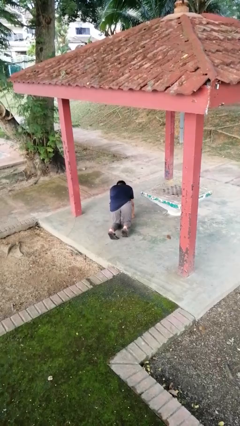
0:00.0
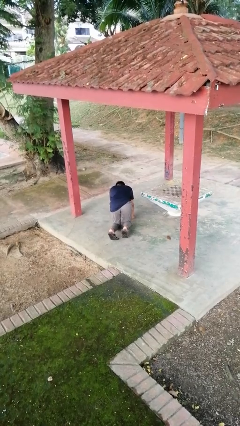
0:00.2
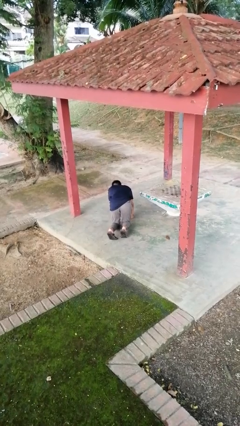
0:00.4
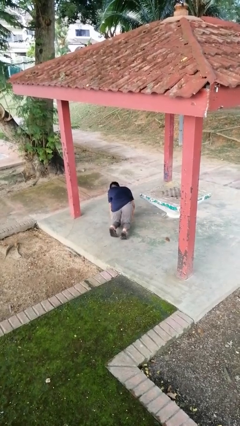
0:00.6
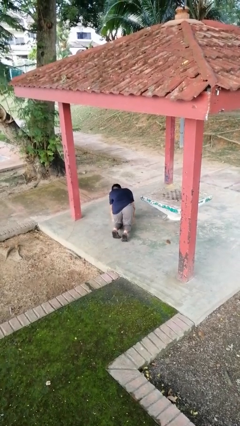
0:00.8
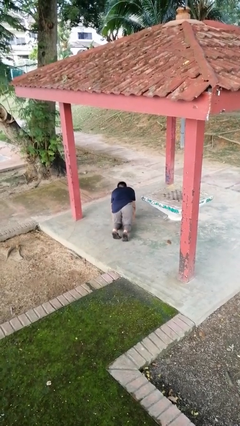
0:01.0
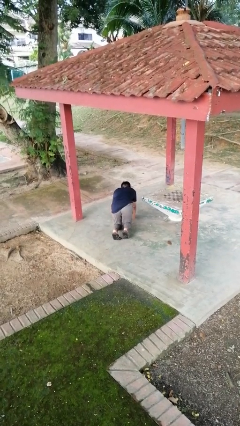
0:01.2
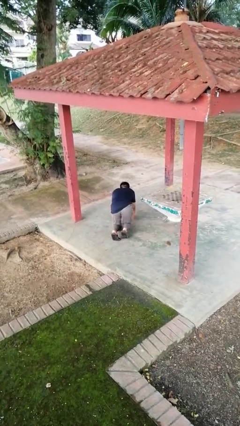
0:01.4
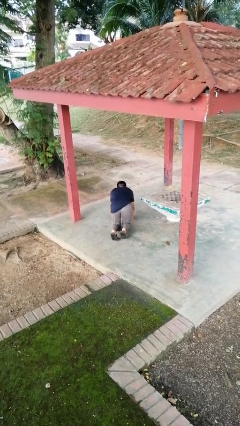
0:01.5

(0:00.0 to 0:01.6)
person crawls

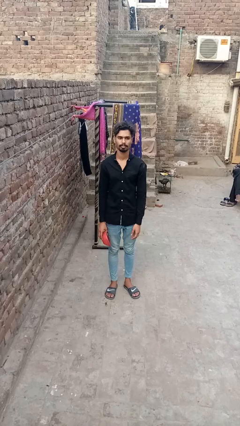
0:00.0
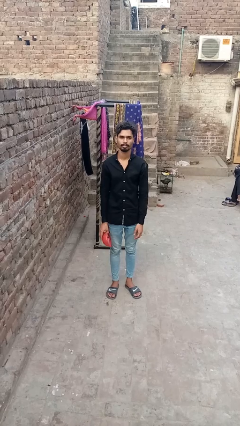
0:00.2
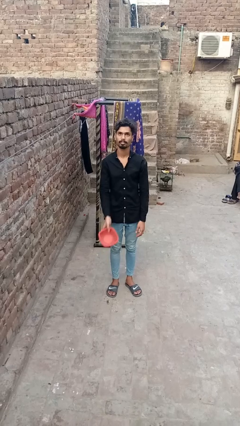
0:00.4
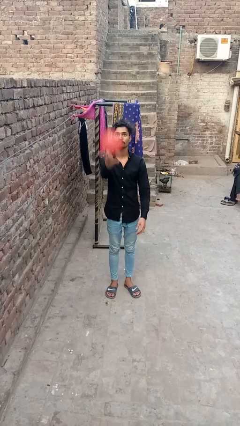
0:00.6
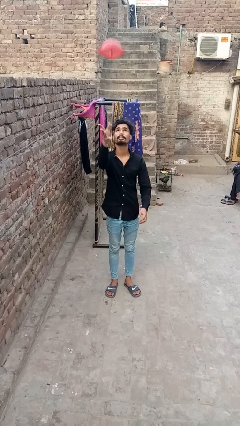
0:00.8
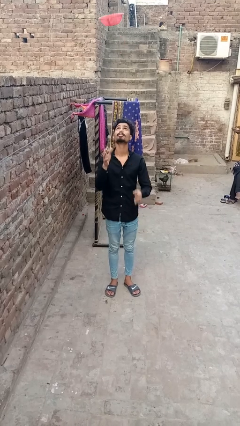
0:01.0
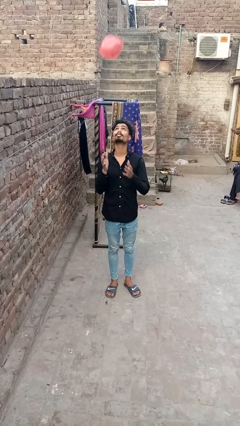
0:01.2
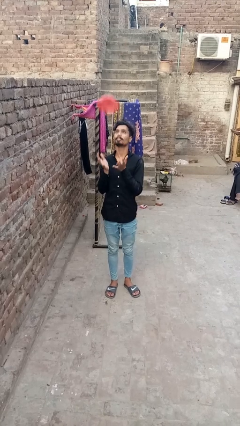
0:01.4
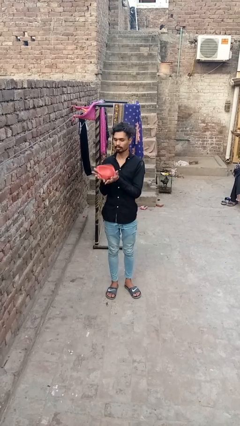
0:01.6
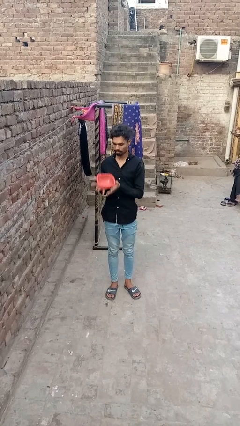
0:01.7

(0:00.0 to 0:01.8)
person drops object

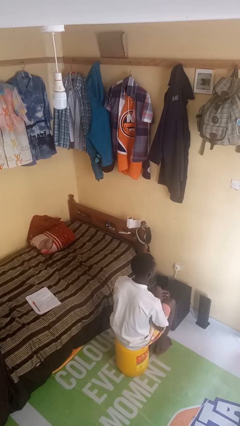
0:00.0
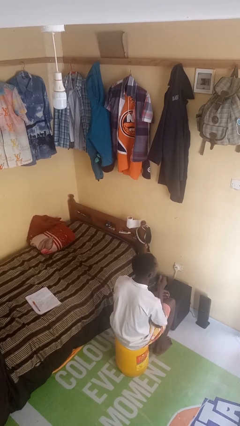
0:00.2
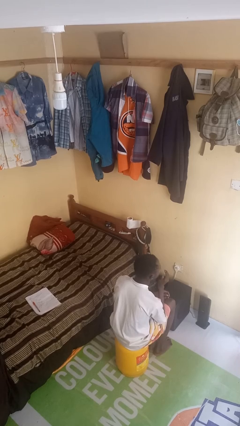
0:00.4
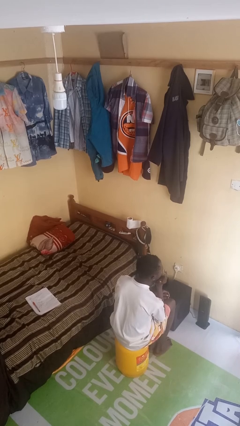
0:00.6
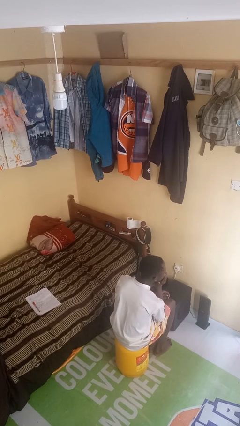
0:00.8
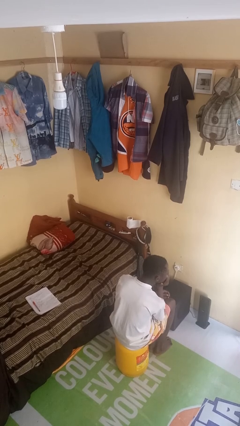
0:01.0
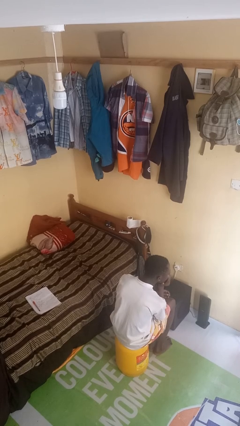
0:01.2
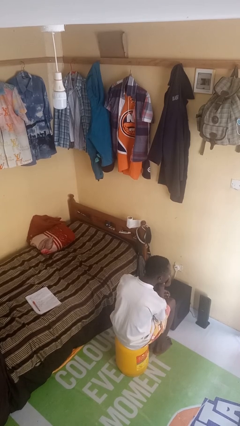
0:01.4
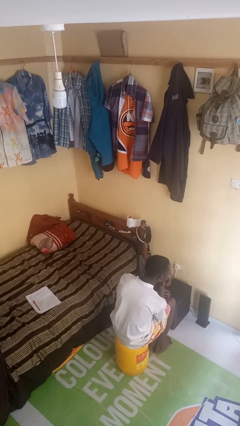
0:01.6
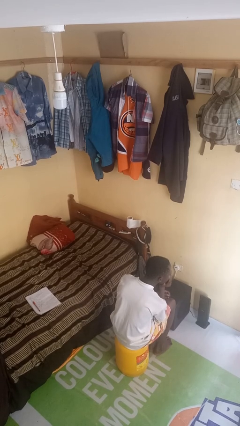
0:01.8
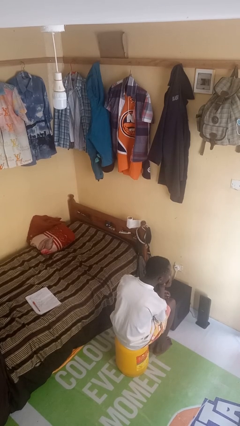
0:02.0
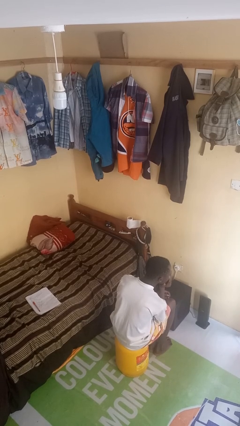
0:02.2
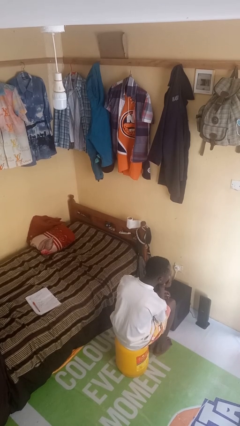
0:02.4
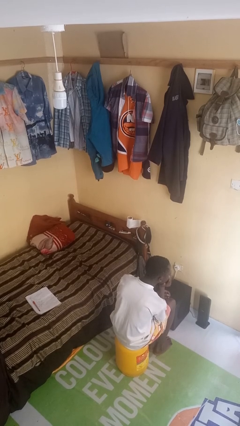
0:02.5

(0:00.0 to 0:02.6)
person strokes chin

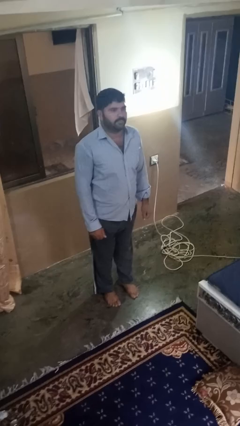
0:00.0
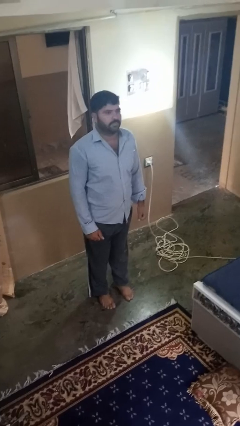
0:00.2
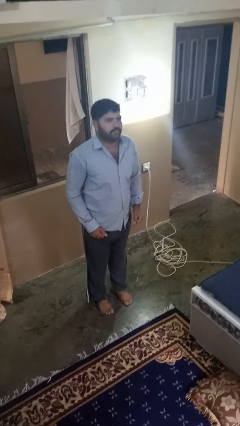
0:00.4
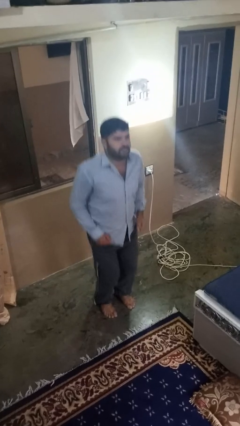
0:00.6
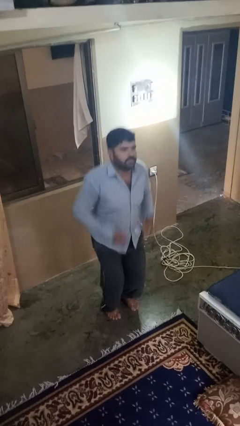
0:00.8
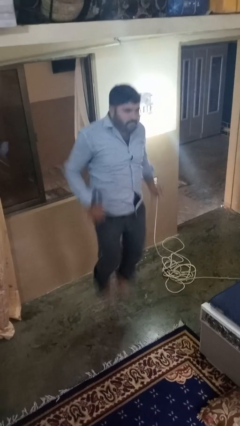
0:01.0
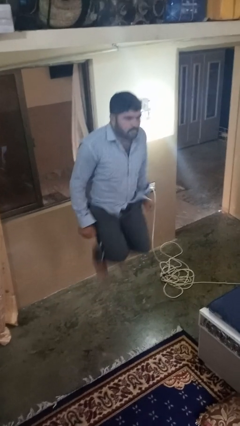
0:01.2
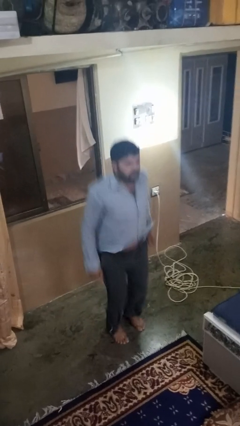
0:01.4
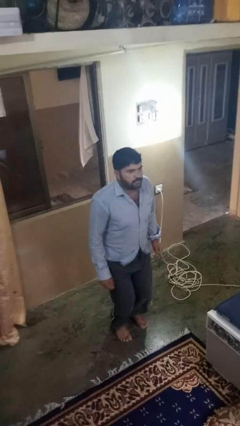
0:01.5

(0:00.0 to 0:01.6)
person jumps

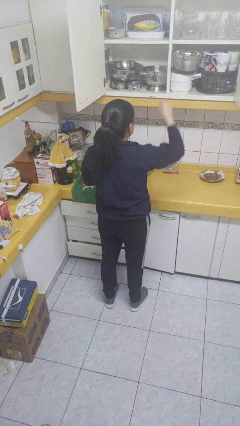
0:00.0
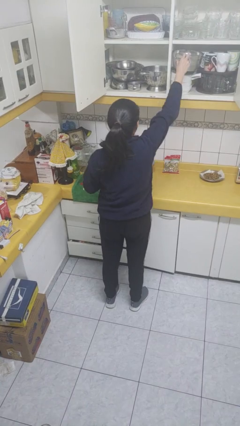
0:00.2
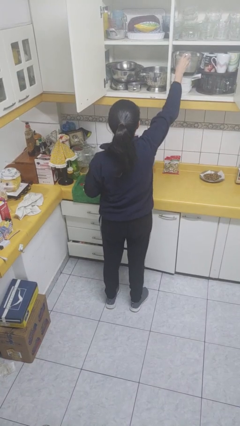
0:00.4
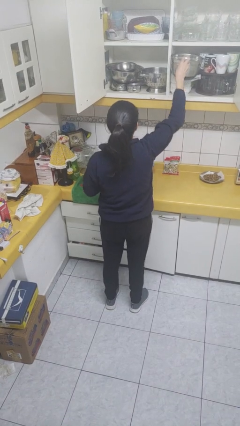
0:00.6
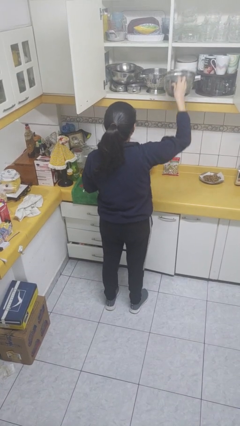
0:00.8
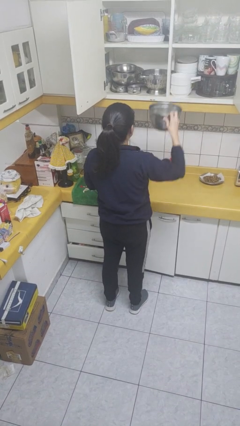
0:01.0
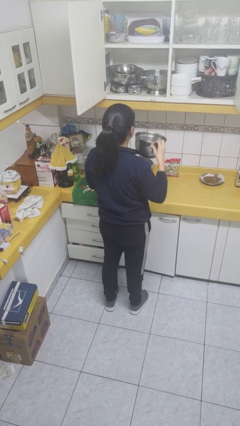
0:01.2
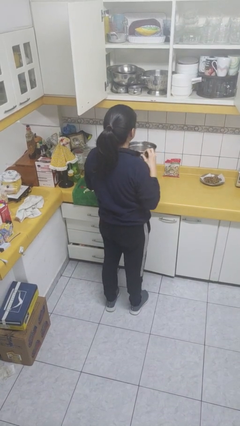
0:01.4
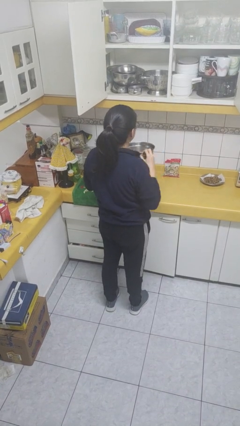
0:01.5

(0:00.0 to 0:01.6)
person picks up object from cabinet

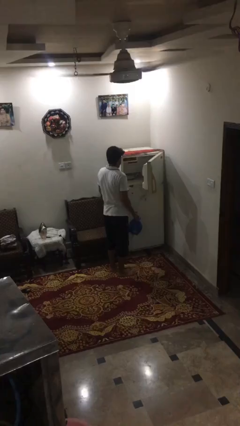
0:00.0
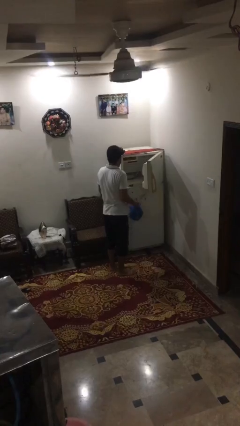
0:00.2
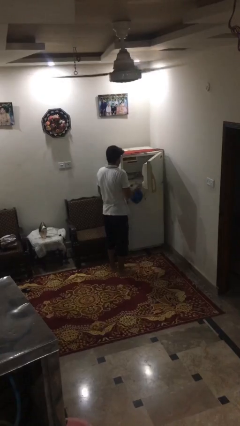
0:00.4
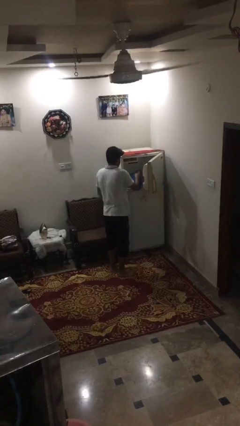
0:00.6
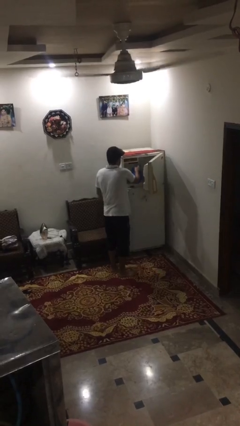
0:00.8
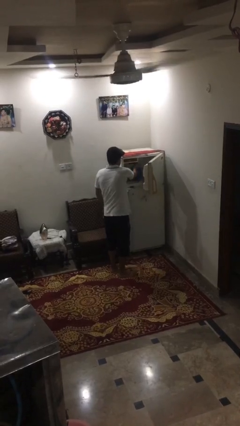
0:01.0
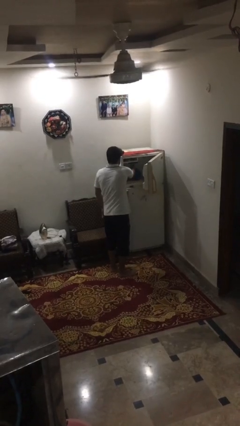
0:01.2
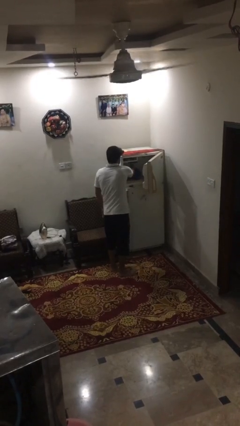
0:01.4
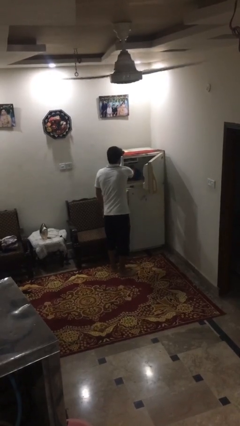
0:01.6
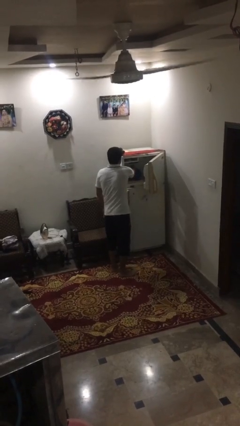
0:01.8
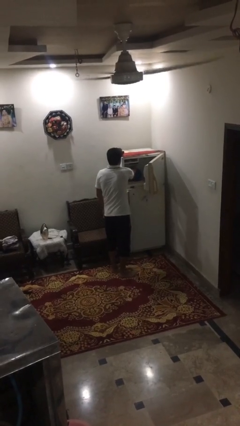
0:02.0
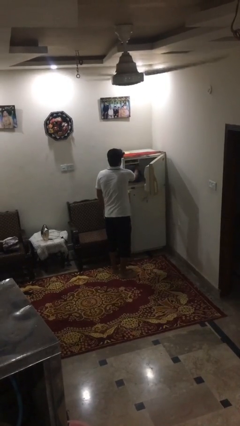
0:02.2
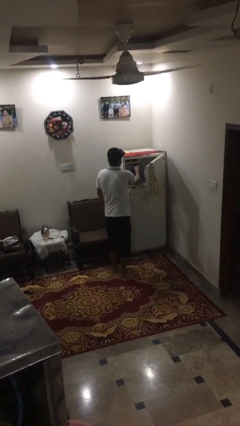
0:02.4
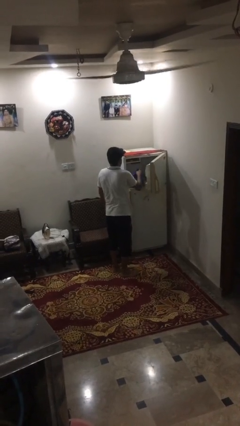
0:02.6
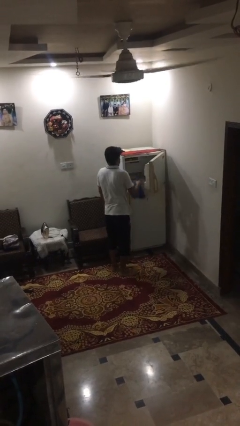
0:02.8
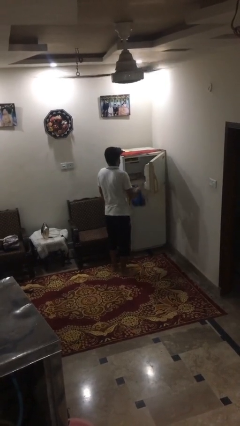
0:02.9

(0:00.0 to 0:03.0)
person loads groceries into refrigerator

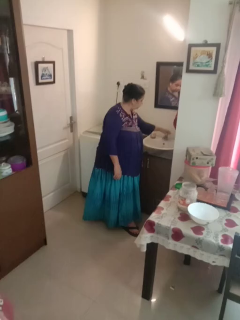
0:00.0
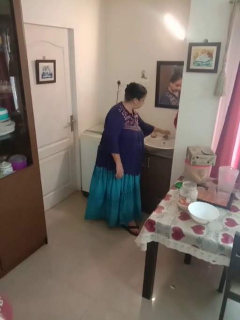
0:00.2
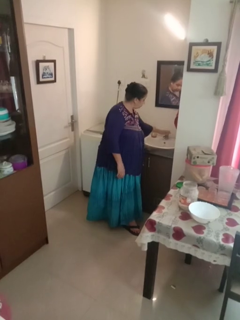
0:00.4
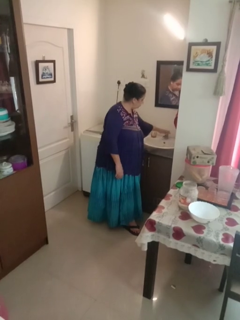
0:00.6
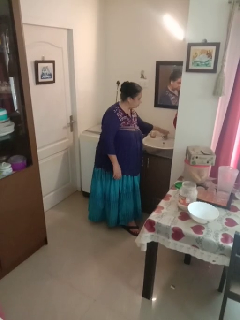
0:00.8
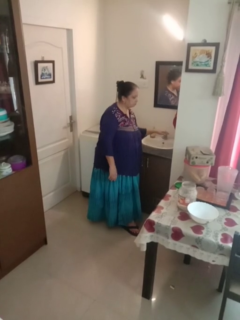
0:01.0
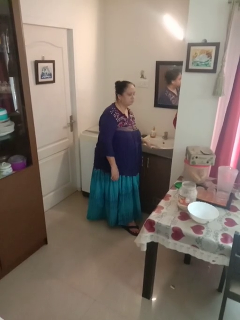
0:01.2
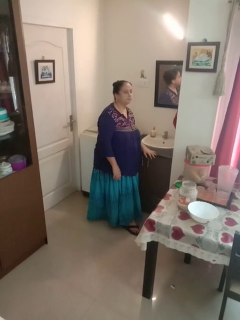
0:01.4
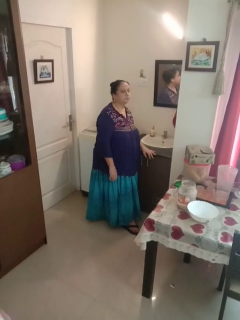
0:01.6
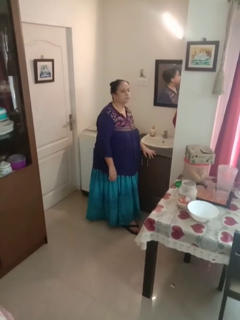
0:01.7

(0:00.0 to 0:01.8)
person turns off faucet

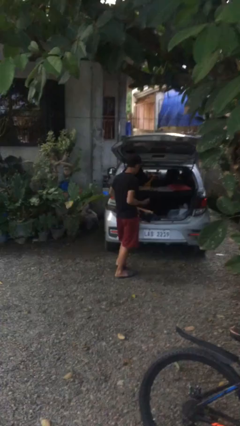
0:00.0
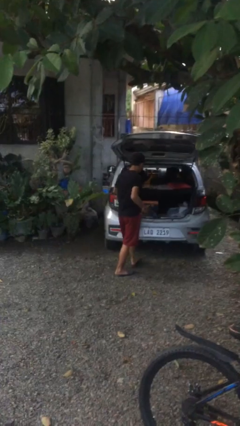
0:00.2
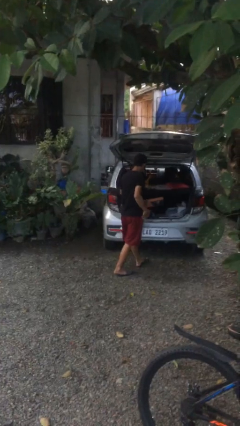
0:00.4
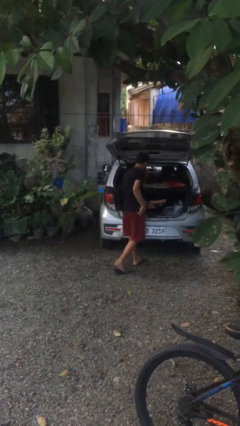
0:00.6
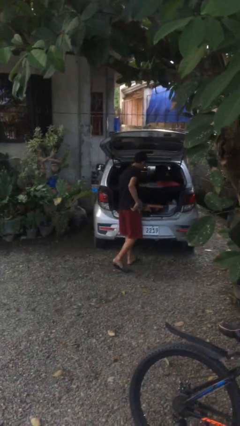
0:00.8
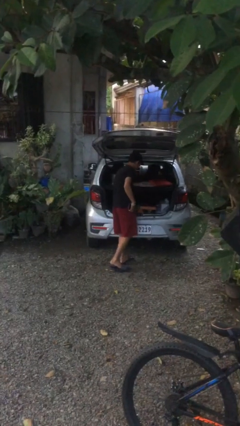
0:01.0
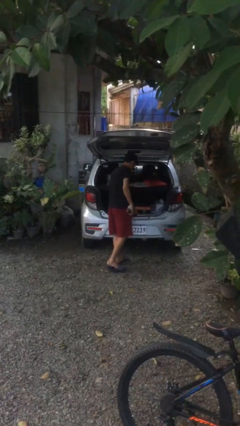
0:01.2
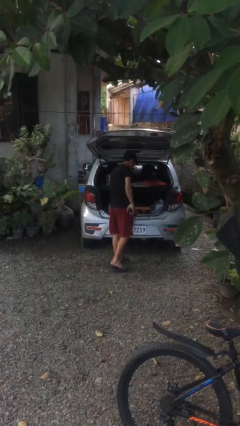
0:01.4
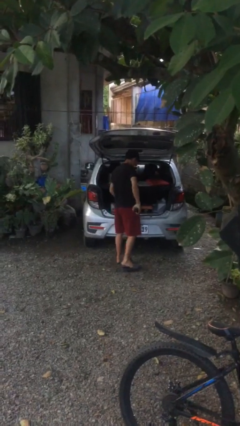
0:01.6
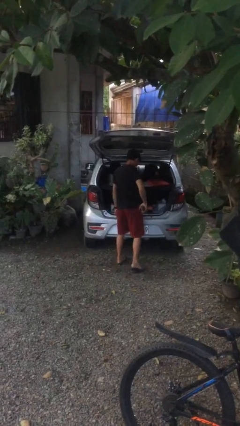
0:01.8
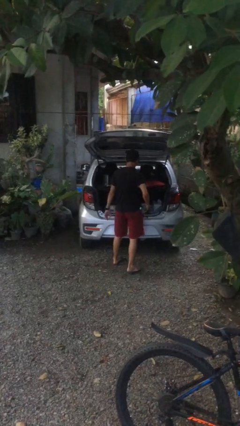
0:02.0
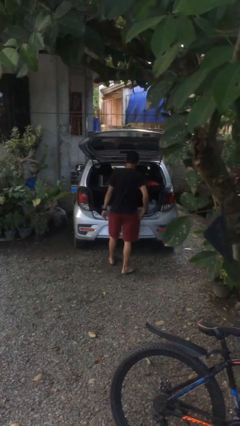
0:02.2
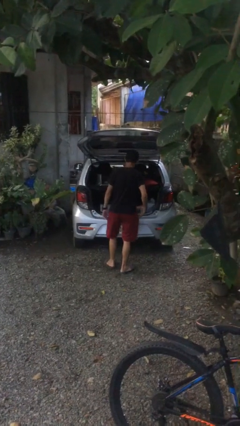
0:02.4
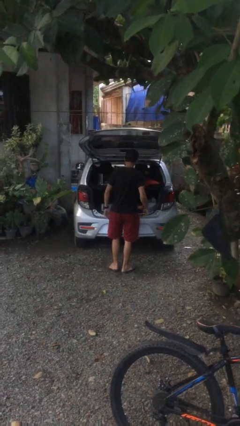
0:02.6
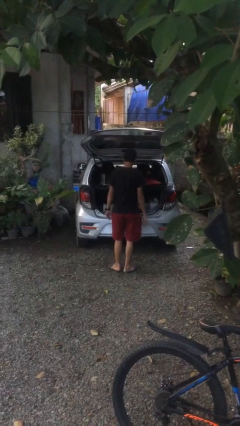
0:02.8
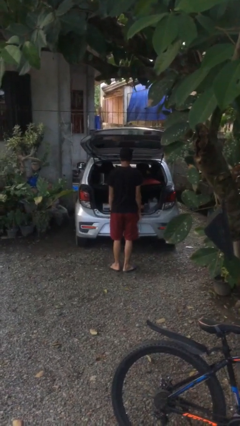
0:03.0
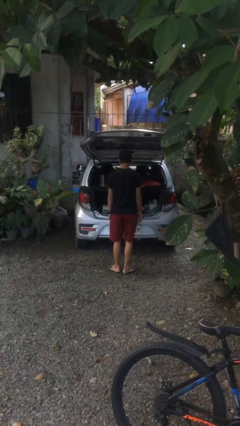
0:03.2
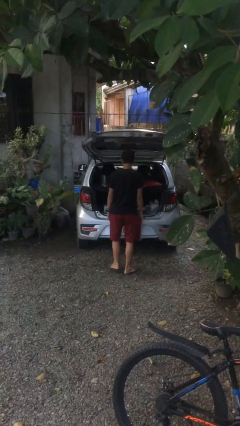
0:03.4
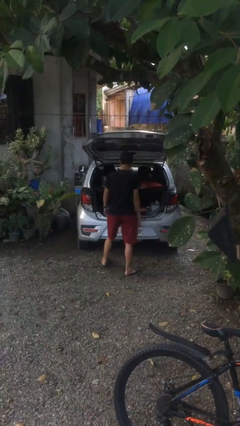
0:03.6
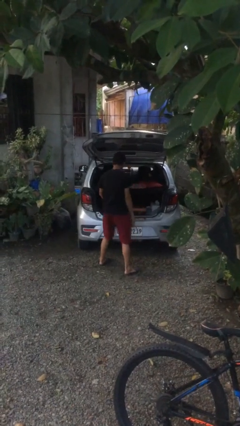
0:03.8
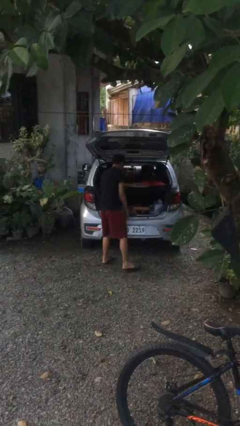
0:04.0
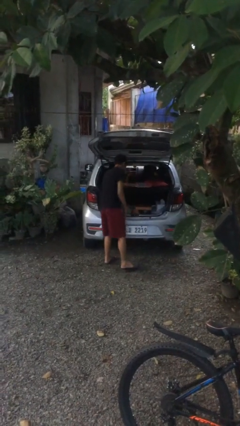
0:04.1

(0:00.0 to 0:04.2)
person loads car
